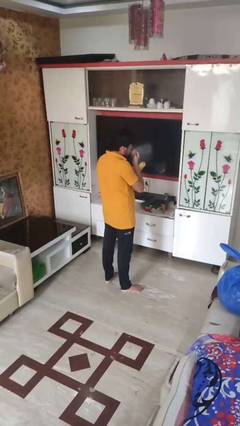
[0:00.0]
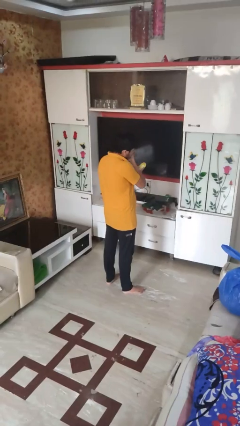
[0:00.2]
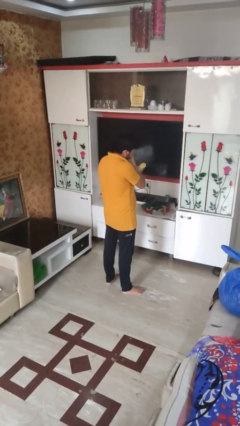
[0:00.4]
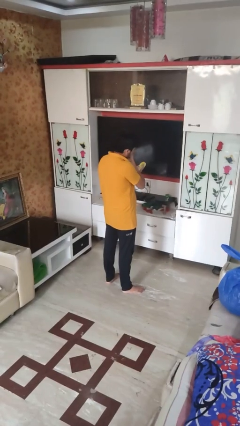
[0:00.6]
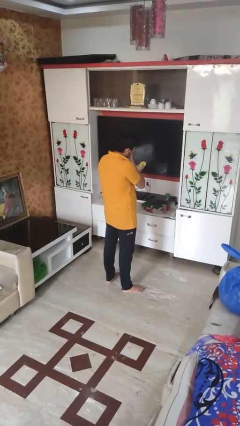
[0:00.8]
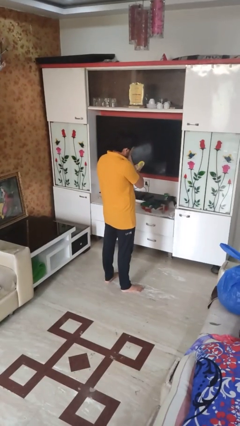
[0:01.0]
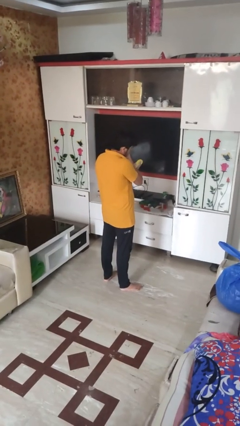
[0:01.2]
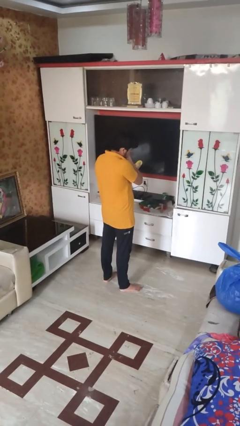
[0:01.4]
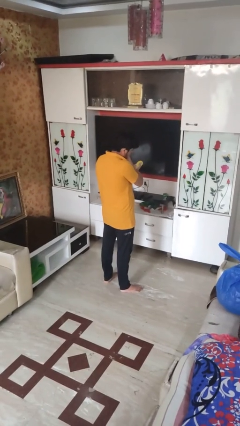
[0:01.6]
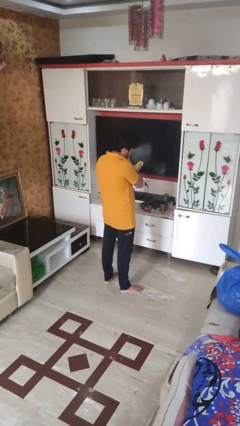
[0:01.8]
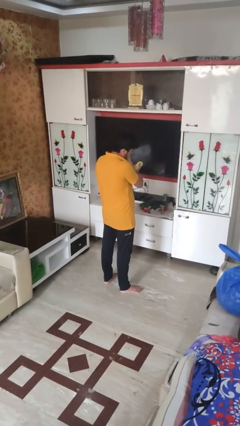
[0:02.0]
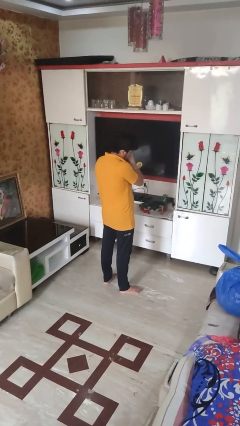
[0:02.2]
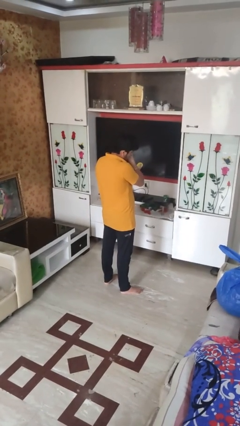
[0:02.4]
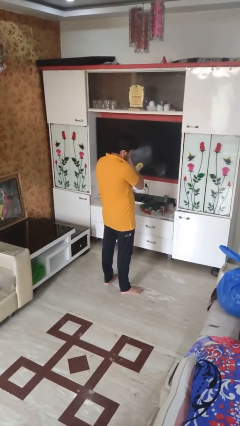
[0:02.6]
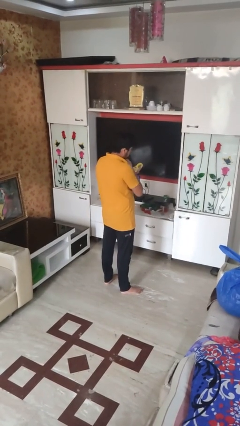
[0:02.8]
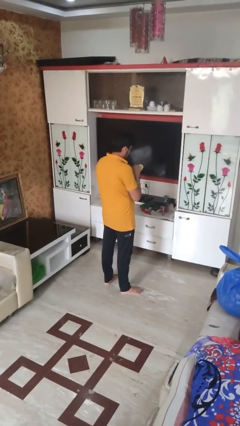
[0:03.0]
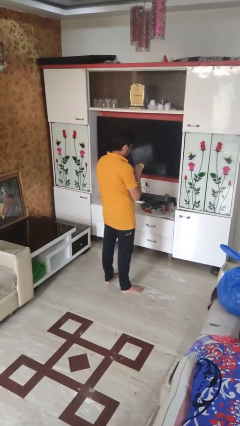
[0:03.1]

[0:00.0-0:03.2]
person applies foundation makeup

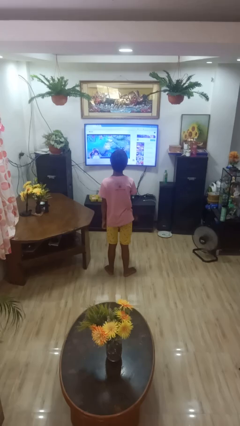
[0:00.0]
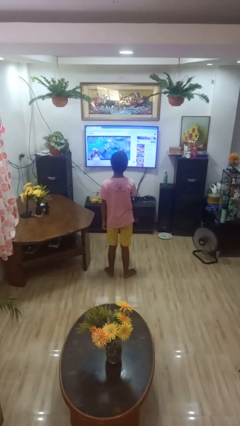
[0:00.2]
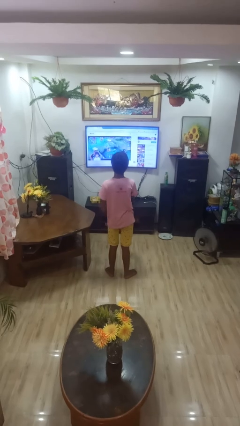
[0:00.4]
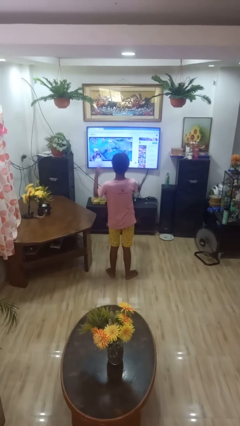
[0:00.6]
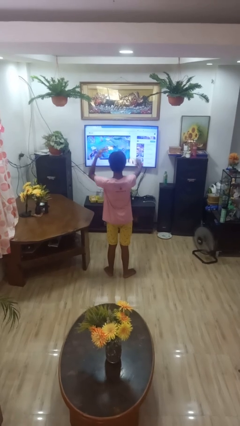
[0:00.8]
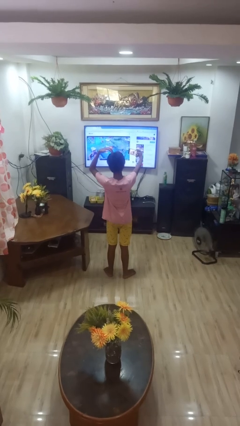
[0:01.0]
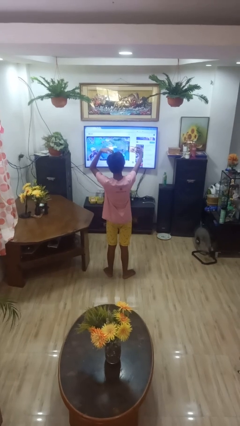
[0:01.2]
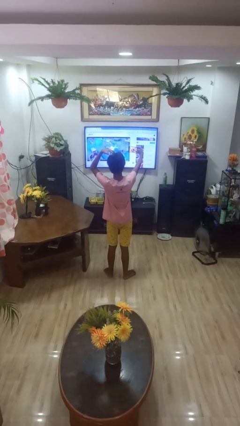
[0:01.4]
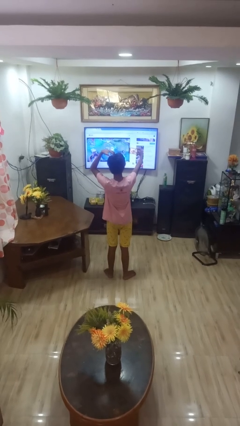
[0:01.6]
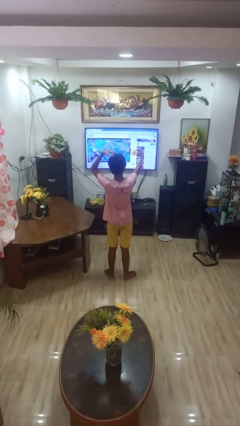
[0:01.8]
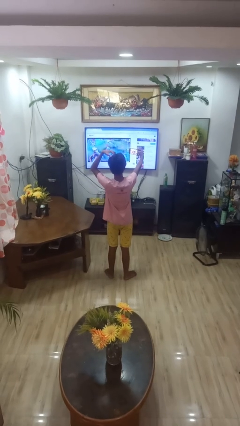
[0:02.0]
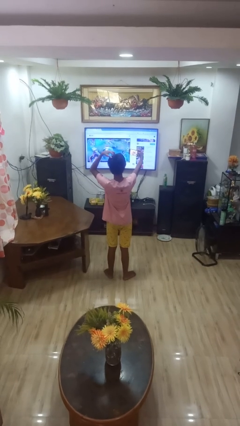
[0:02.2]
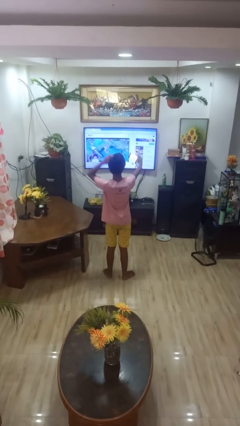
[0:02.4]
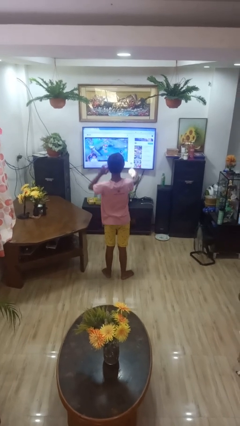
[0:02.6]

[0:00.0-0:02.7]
person takes selfie

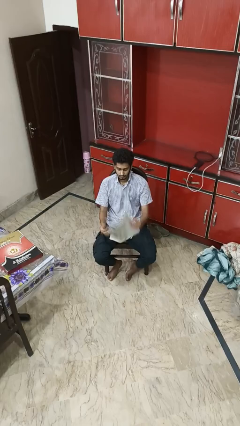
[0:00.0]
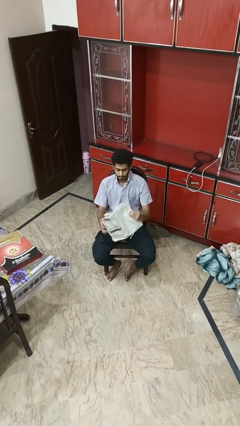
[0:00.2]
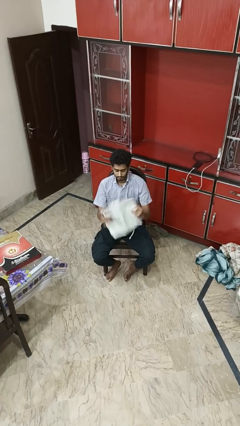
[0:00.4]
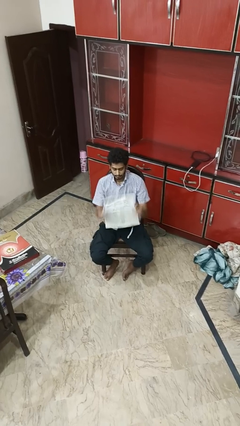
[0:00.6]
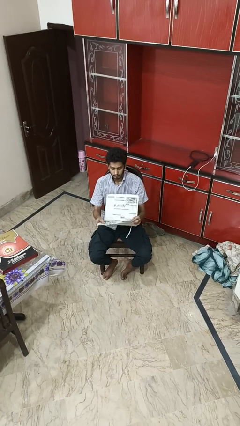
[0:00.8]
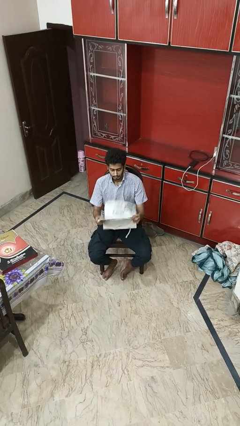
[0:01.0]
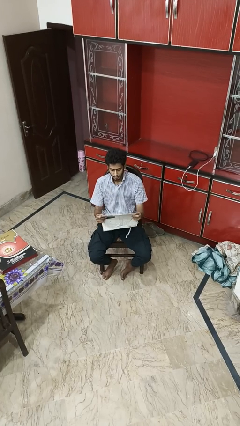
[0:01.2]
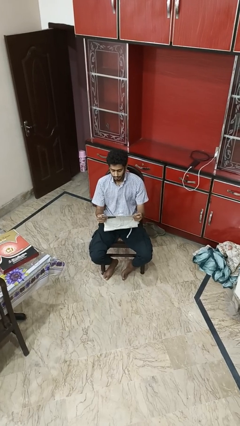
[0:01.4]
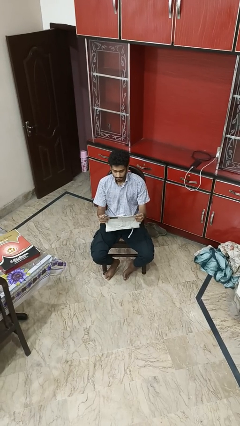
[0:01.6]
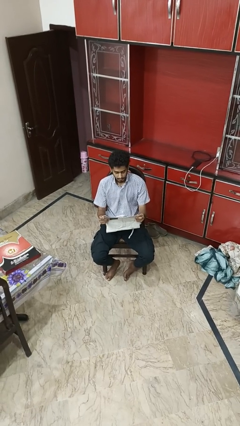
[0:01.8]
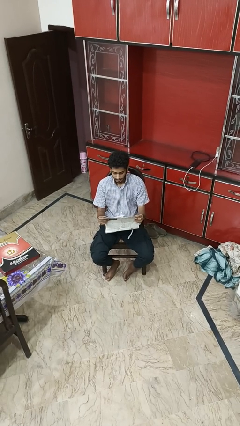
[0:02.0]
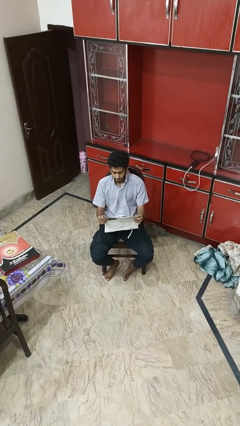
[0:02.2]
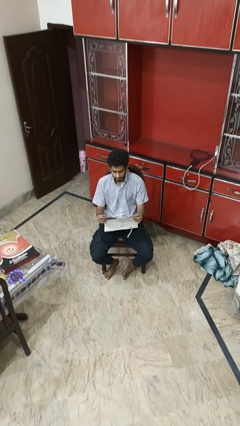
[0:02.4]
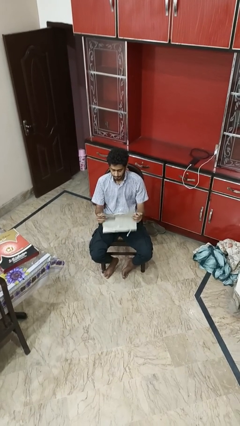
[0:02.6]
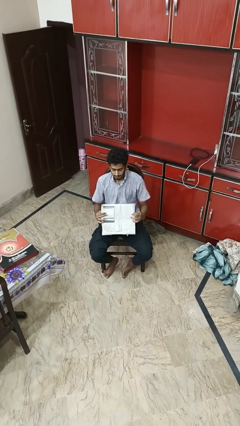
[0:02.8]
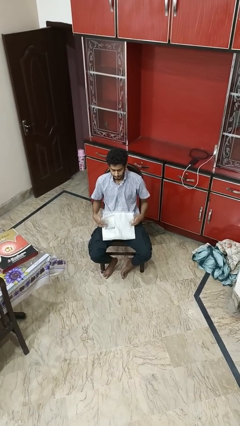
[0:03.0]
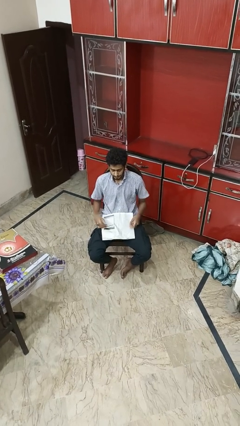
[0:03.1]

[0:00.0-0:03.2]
person reads newspaper

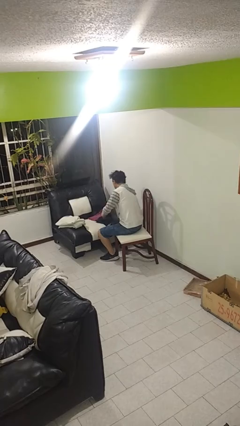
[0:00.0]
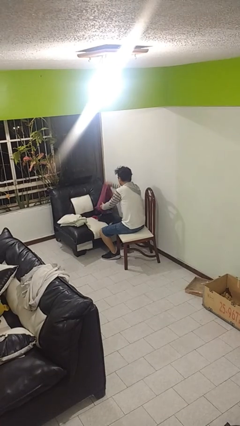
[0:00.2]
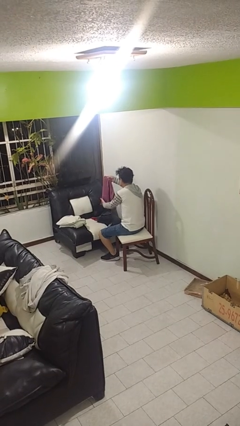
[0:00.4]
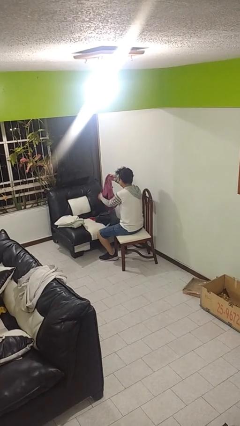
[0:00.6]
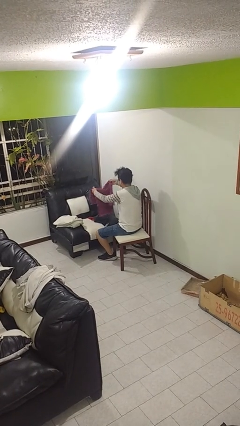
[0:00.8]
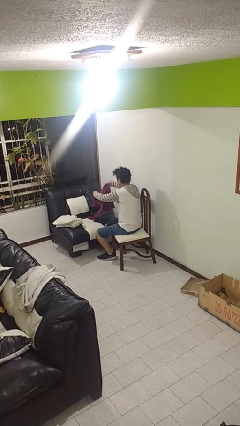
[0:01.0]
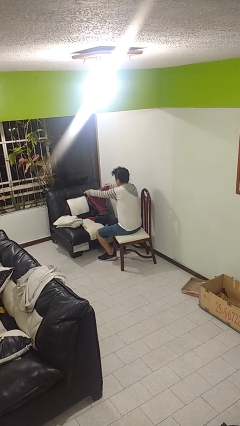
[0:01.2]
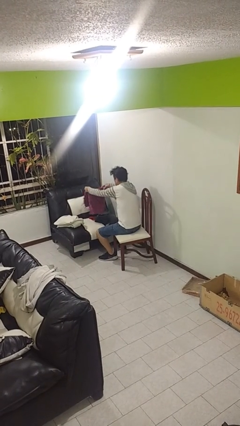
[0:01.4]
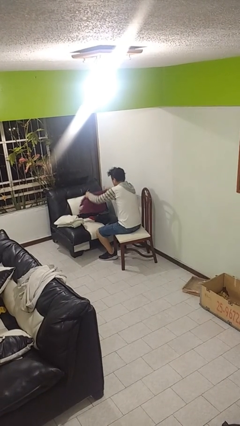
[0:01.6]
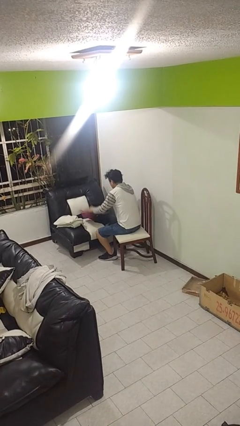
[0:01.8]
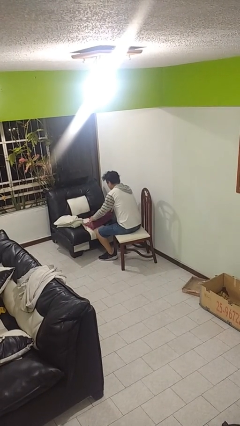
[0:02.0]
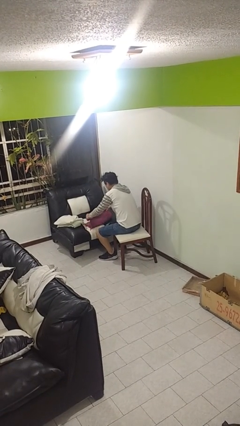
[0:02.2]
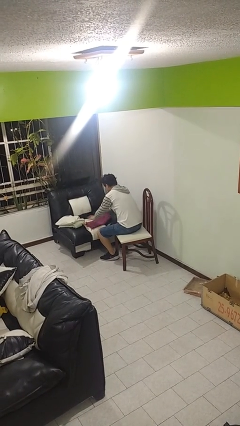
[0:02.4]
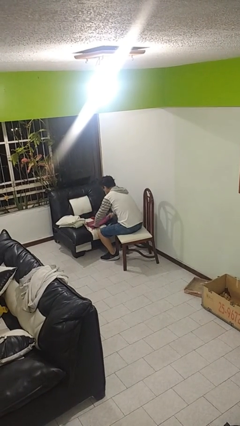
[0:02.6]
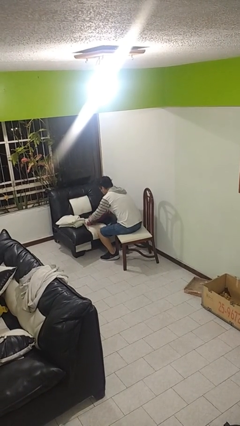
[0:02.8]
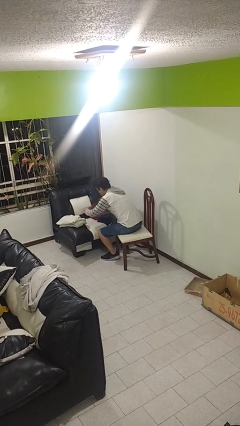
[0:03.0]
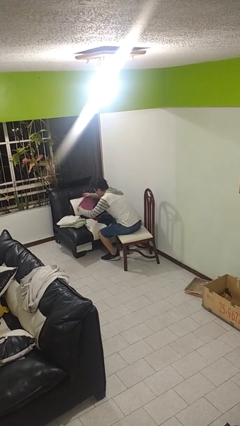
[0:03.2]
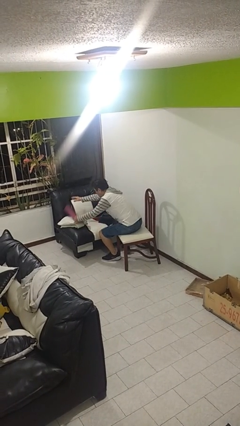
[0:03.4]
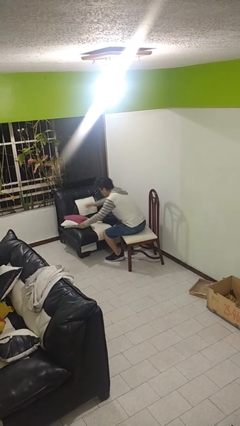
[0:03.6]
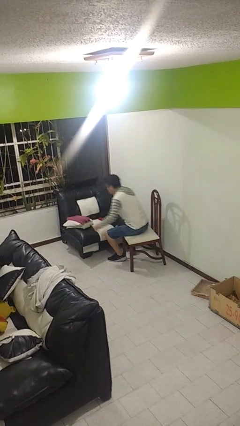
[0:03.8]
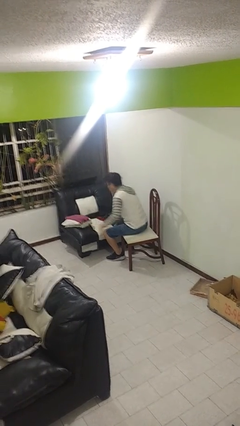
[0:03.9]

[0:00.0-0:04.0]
person folds towel

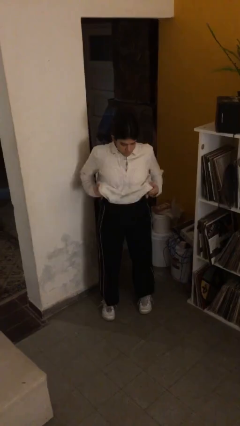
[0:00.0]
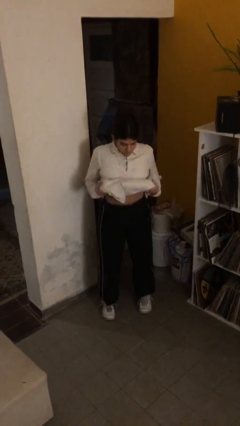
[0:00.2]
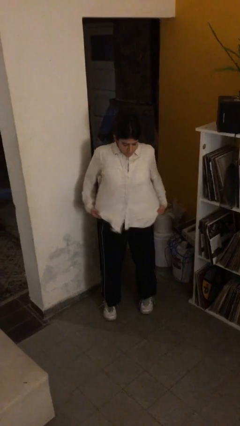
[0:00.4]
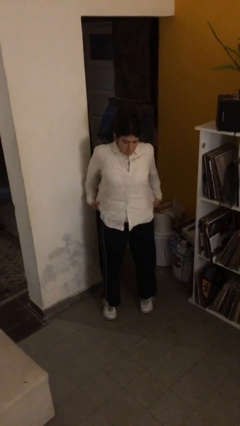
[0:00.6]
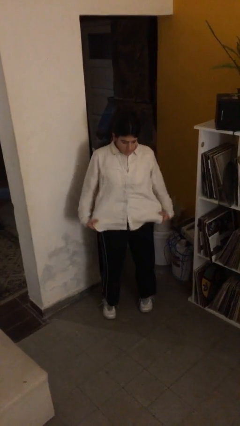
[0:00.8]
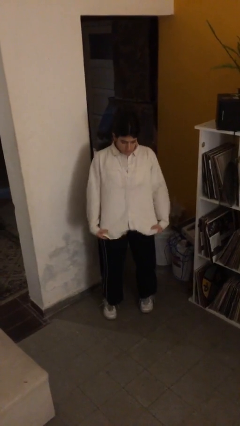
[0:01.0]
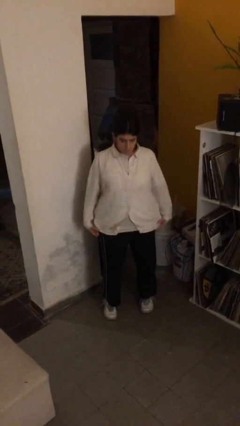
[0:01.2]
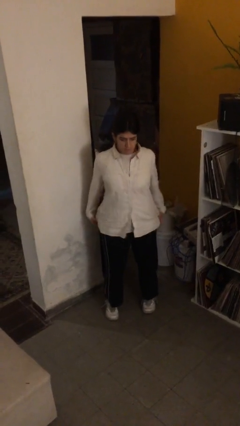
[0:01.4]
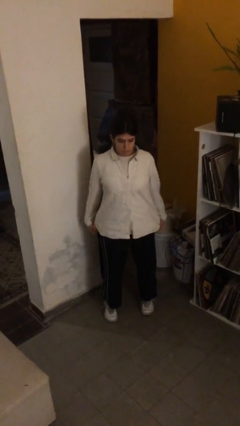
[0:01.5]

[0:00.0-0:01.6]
person untucks shirt

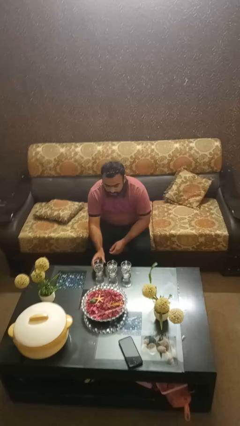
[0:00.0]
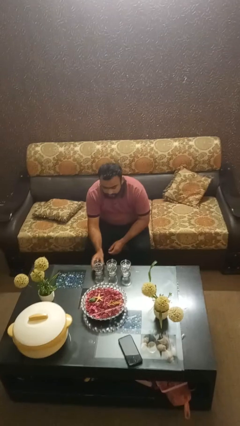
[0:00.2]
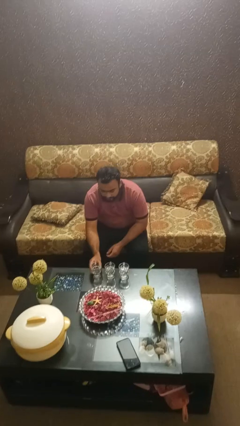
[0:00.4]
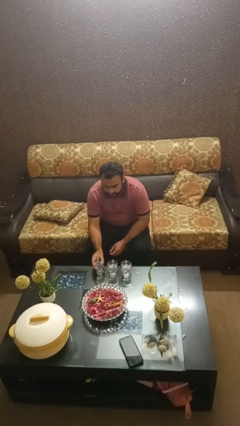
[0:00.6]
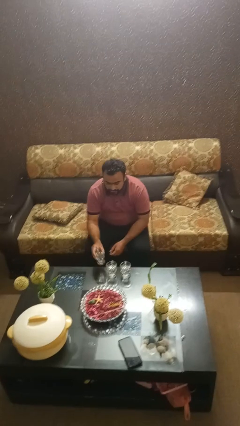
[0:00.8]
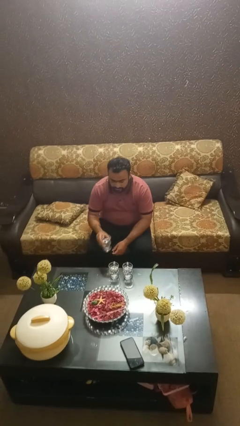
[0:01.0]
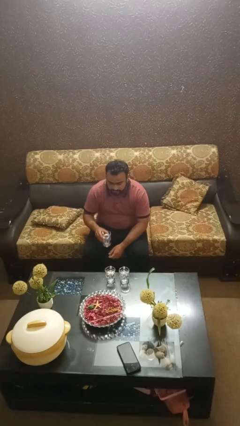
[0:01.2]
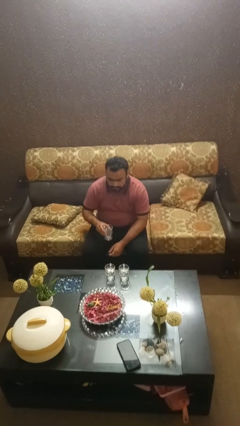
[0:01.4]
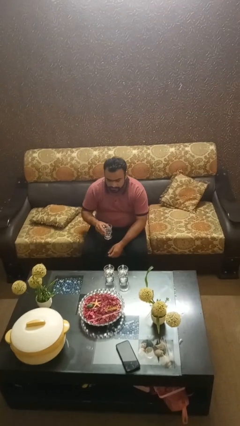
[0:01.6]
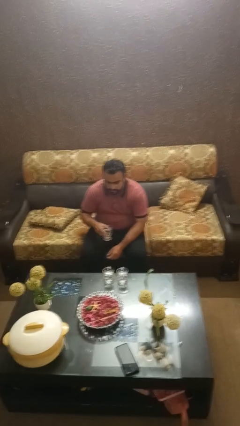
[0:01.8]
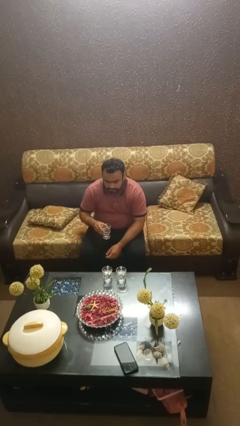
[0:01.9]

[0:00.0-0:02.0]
person picks up object from table

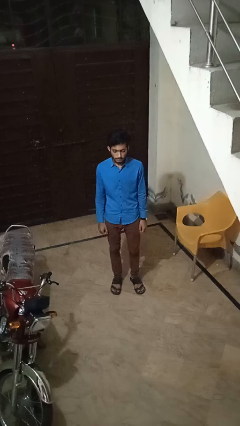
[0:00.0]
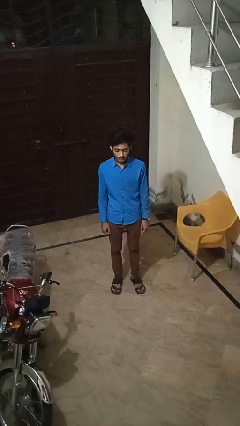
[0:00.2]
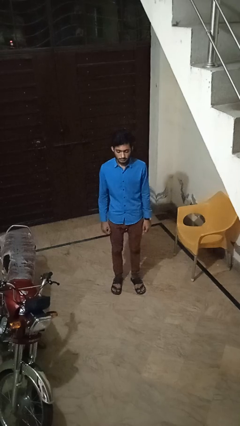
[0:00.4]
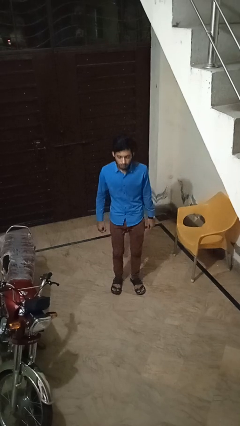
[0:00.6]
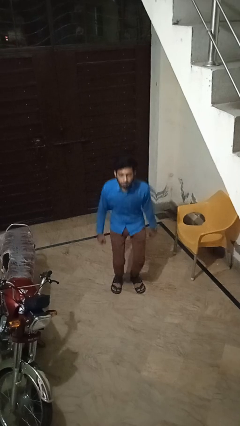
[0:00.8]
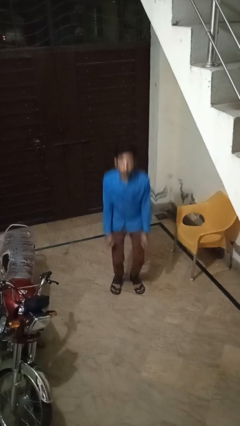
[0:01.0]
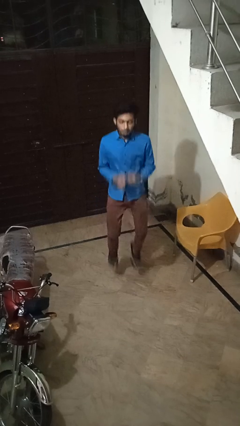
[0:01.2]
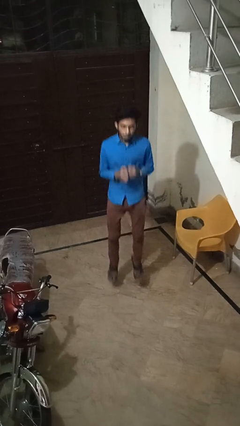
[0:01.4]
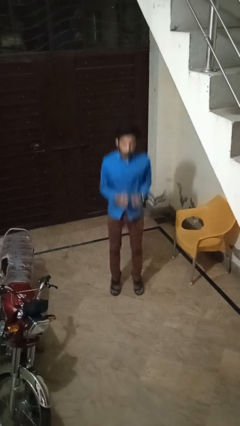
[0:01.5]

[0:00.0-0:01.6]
person jumps
